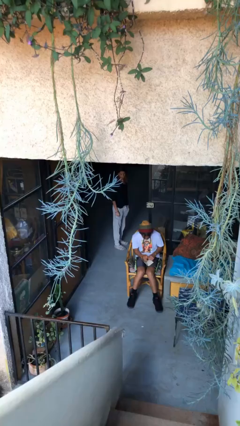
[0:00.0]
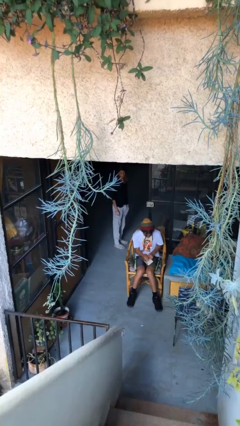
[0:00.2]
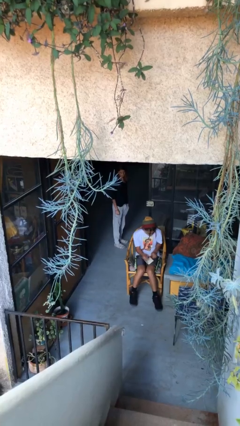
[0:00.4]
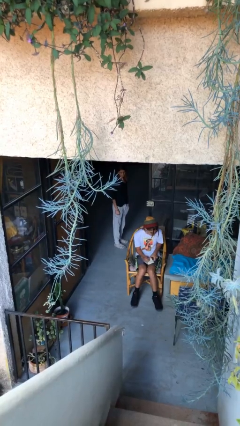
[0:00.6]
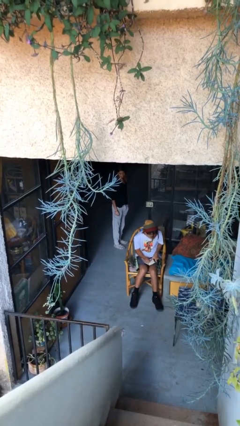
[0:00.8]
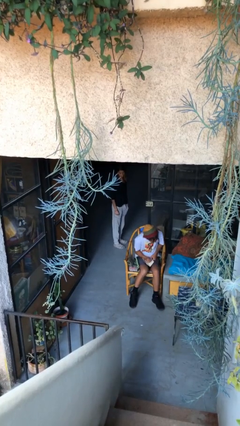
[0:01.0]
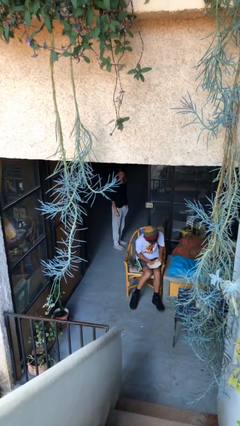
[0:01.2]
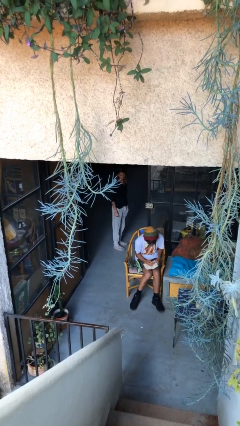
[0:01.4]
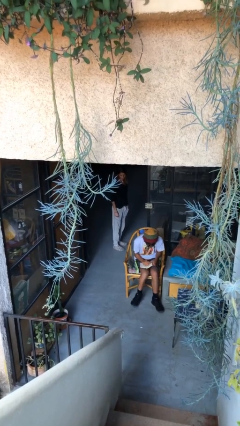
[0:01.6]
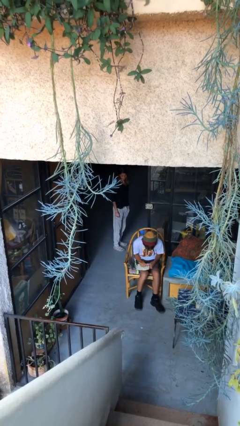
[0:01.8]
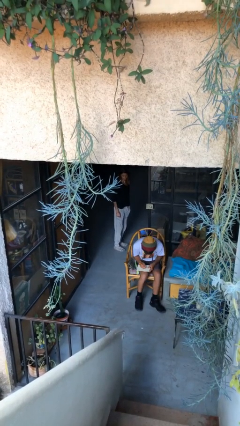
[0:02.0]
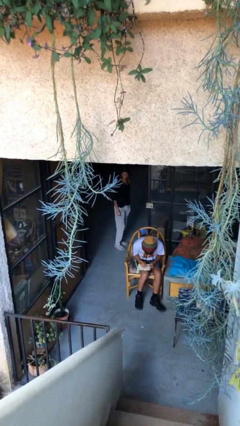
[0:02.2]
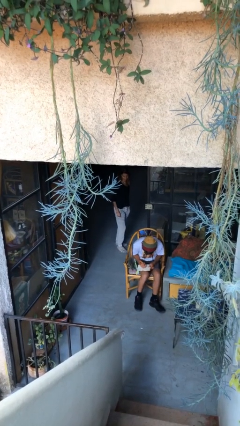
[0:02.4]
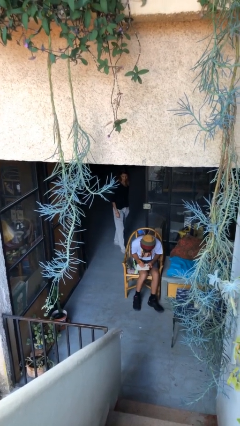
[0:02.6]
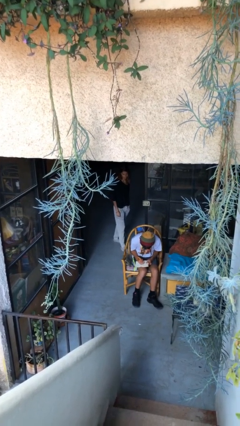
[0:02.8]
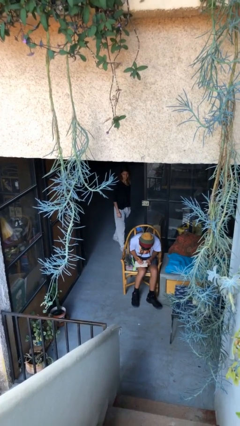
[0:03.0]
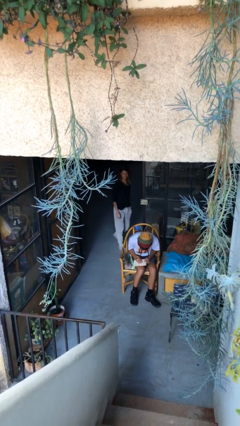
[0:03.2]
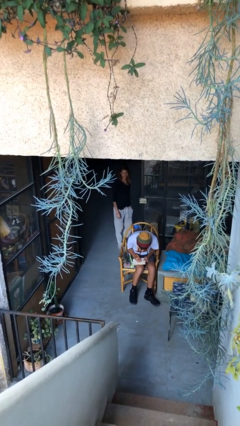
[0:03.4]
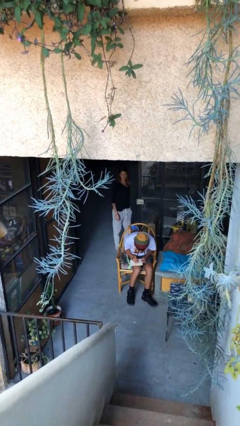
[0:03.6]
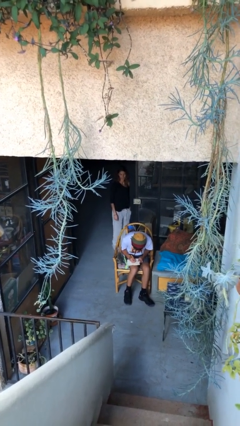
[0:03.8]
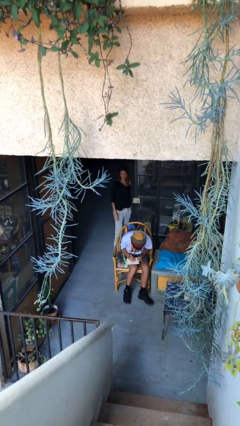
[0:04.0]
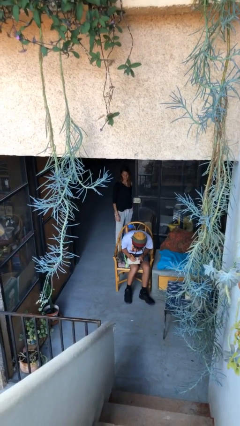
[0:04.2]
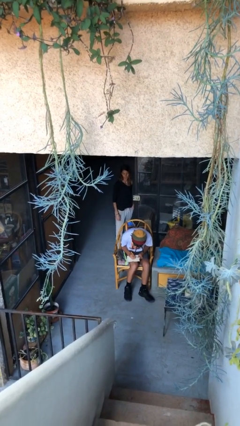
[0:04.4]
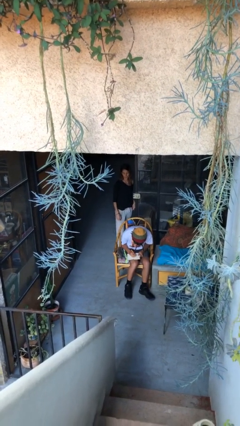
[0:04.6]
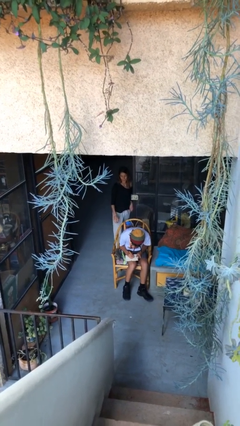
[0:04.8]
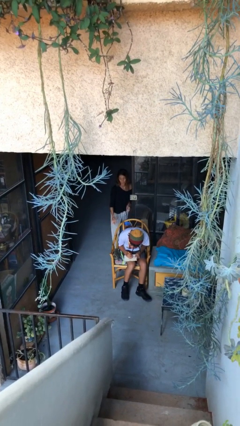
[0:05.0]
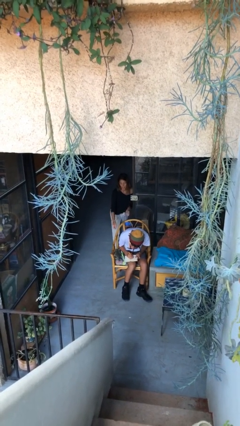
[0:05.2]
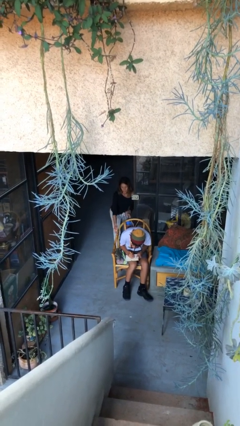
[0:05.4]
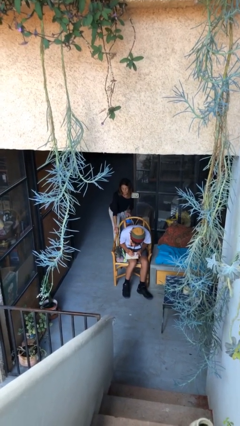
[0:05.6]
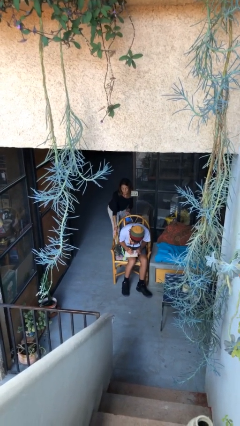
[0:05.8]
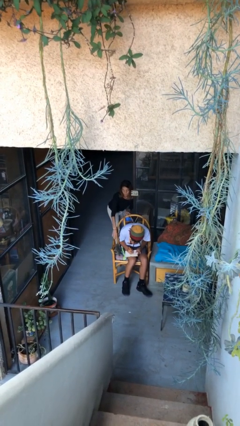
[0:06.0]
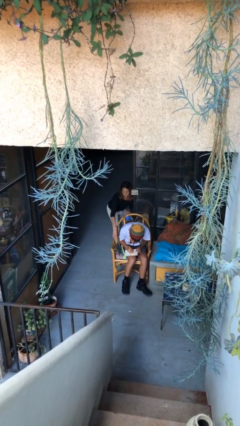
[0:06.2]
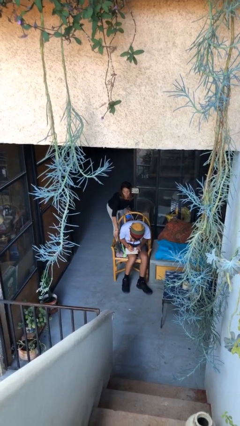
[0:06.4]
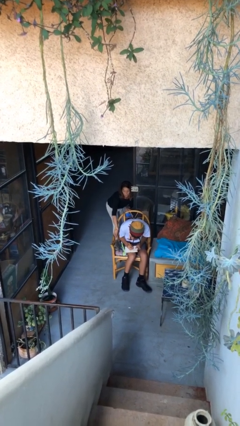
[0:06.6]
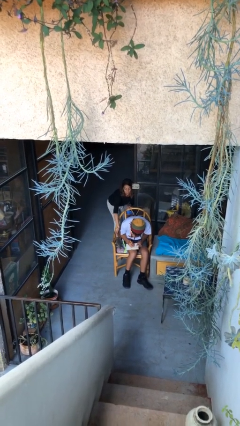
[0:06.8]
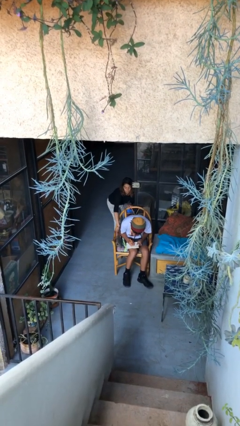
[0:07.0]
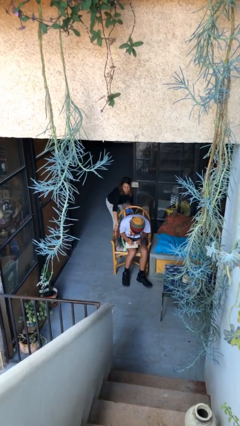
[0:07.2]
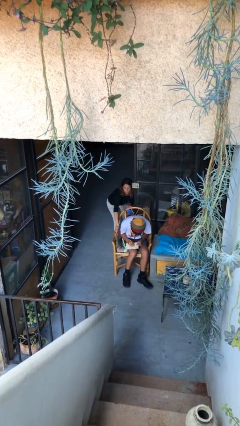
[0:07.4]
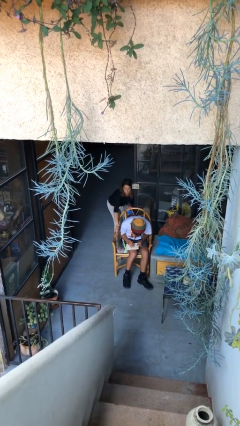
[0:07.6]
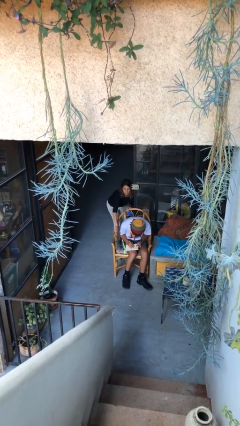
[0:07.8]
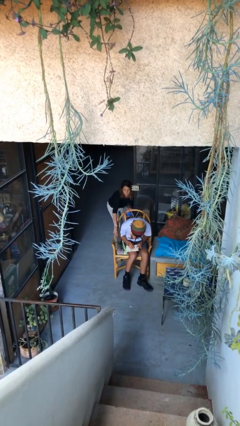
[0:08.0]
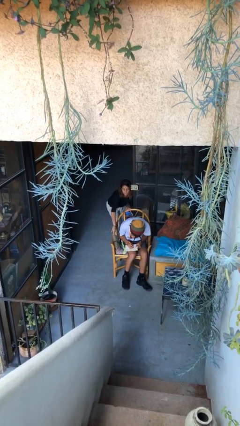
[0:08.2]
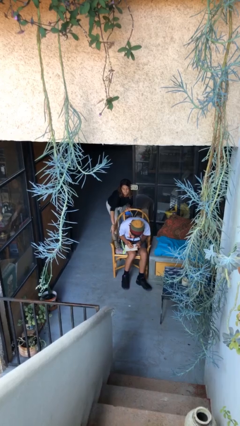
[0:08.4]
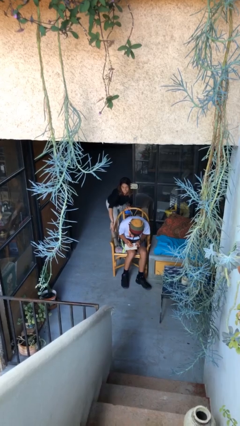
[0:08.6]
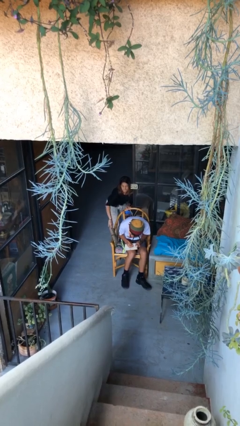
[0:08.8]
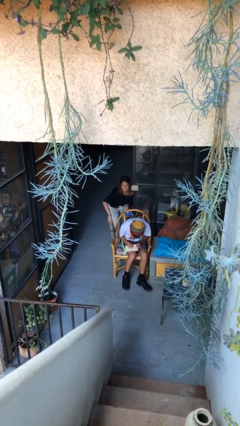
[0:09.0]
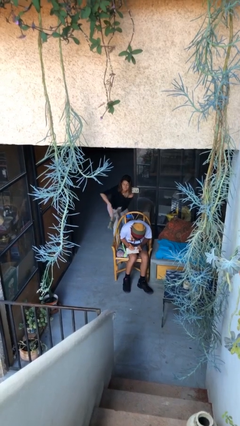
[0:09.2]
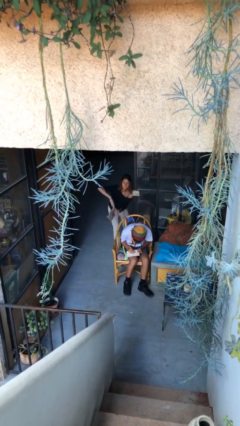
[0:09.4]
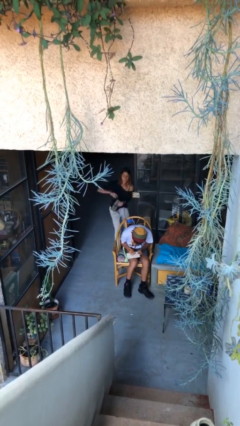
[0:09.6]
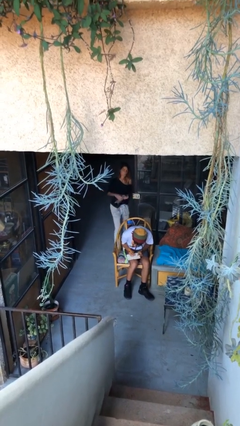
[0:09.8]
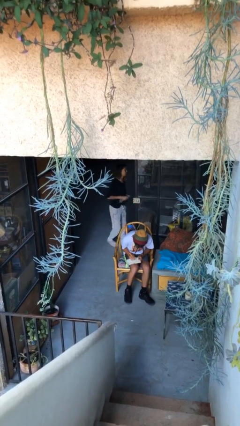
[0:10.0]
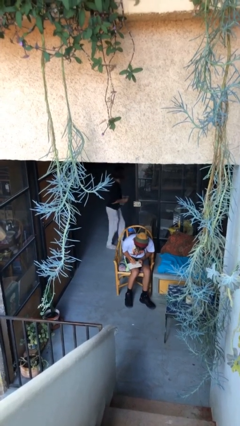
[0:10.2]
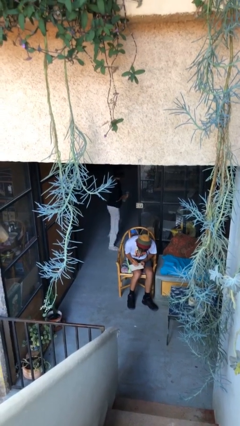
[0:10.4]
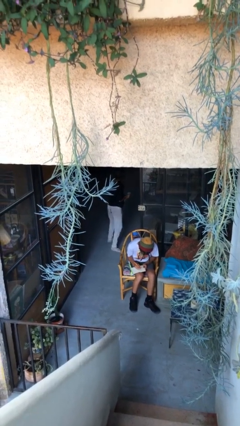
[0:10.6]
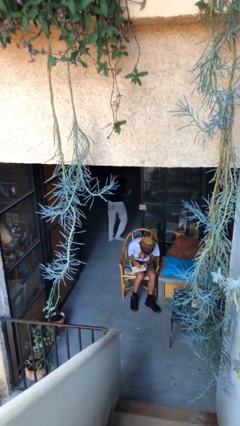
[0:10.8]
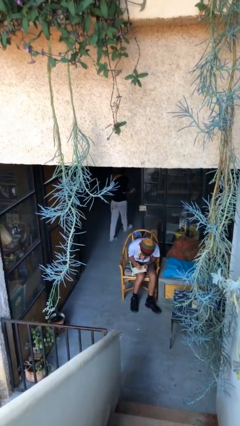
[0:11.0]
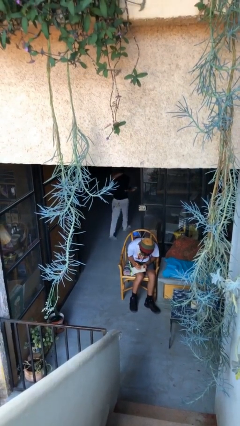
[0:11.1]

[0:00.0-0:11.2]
person steals object from person

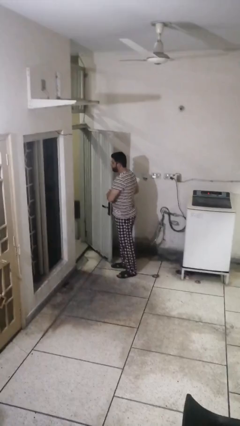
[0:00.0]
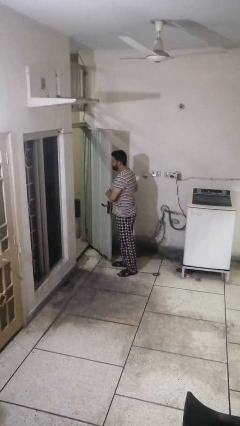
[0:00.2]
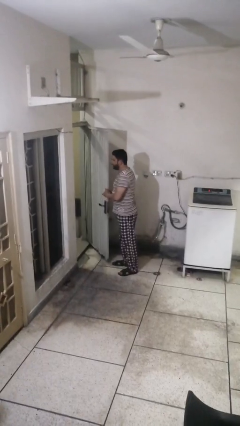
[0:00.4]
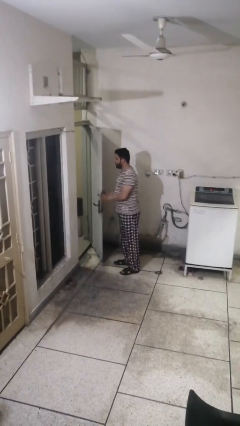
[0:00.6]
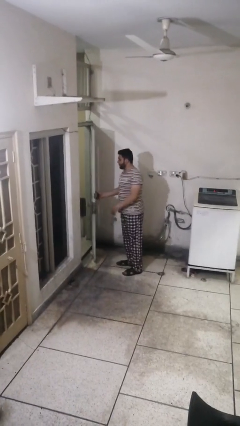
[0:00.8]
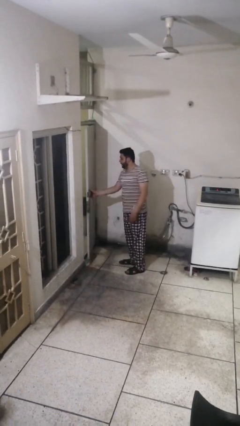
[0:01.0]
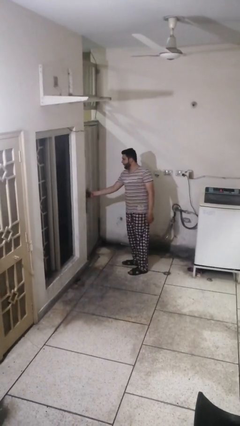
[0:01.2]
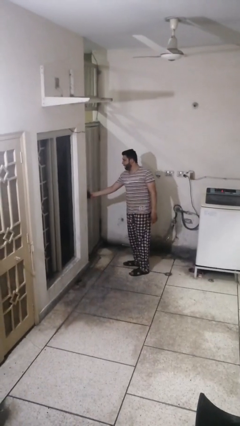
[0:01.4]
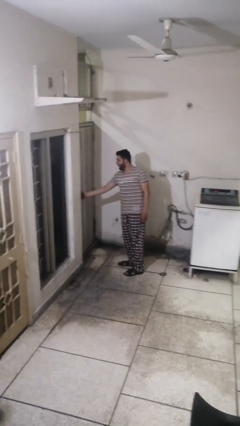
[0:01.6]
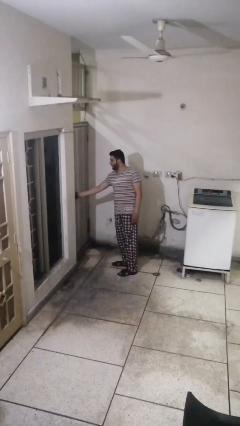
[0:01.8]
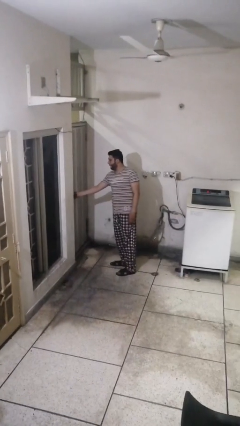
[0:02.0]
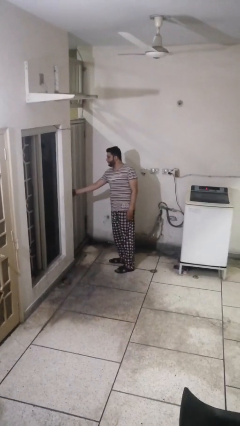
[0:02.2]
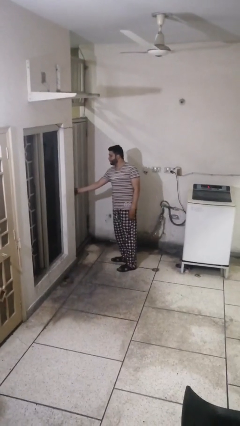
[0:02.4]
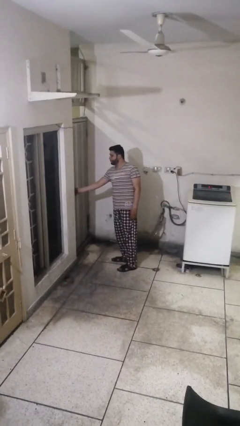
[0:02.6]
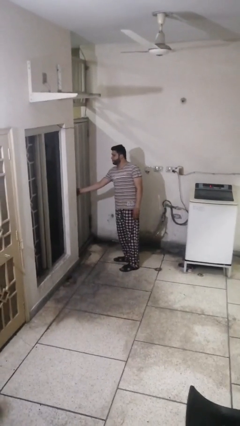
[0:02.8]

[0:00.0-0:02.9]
person closes facility door

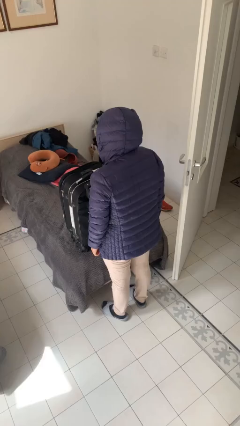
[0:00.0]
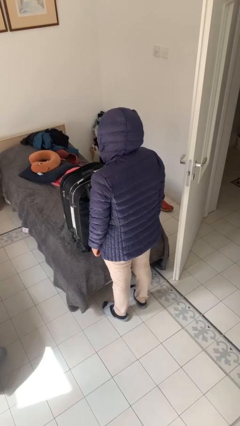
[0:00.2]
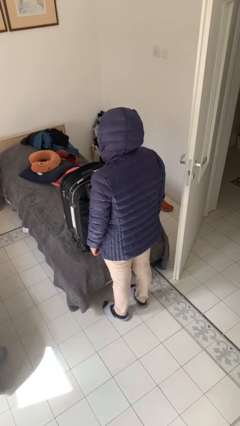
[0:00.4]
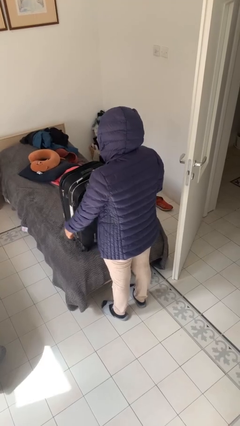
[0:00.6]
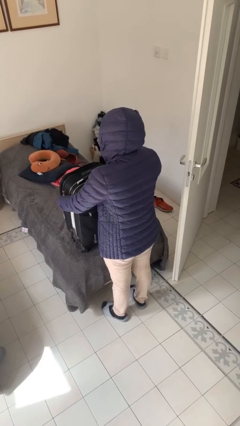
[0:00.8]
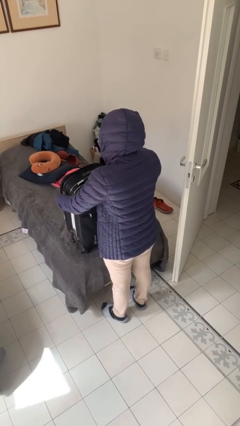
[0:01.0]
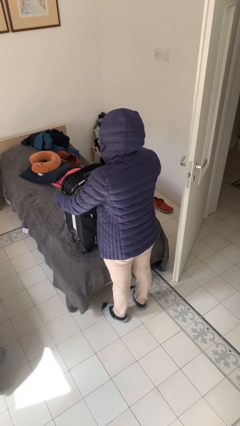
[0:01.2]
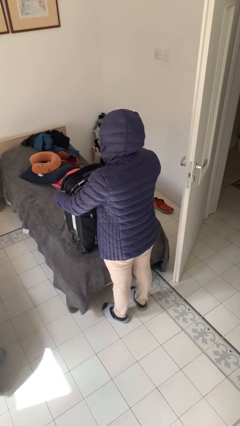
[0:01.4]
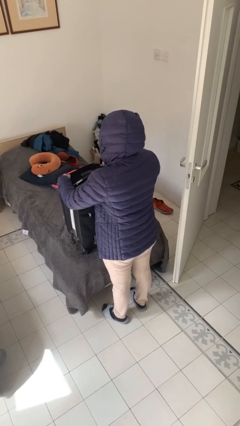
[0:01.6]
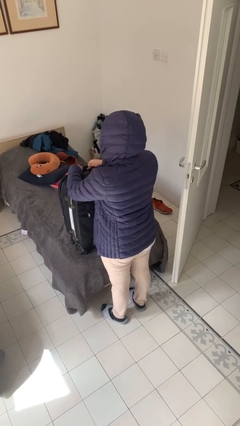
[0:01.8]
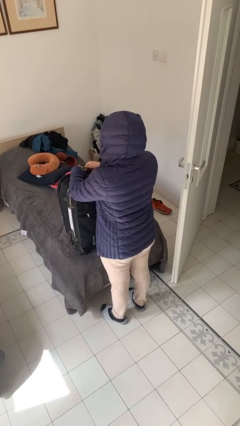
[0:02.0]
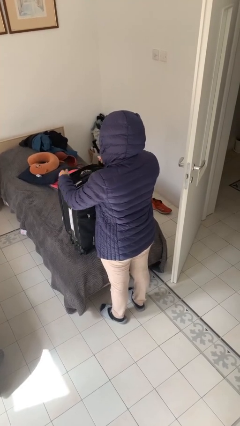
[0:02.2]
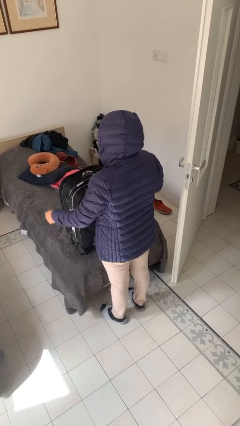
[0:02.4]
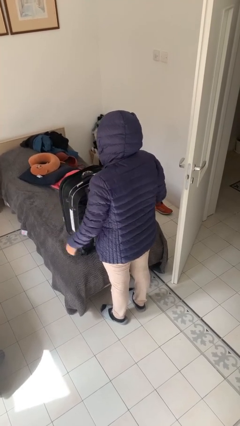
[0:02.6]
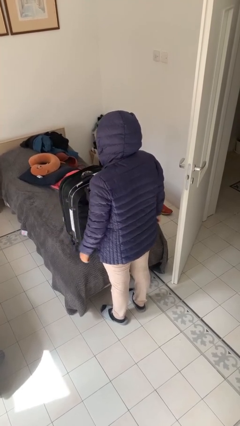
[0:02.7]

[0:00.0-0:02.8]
person closes suitcase

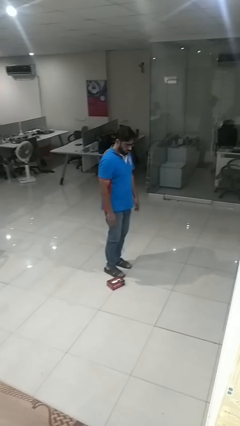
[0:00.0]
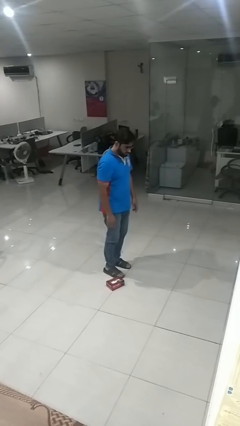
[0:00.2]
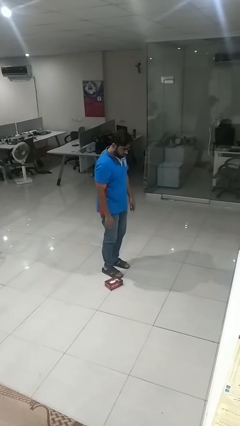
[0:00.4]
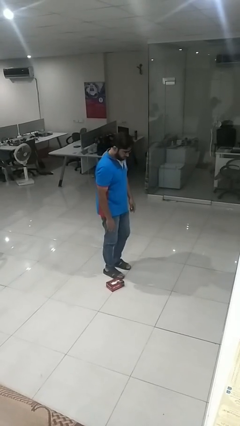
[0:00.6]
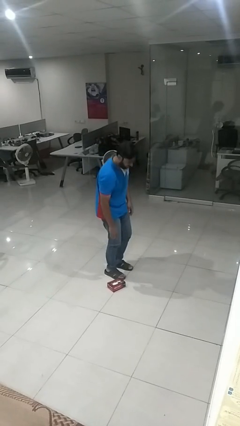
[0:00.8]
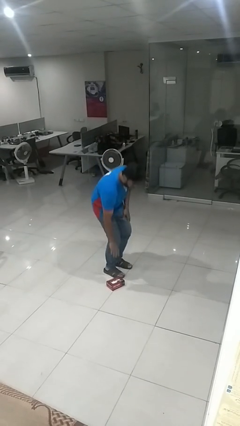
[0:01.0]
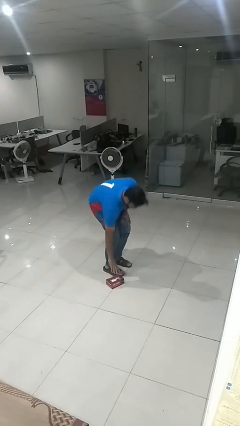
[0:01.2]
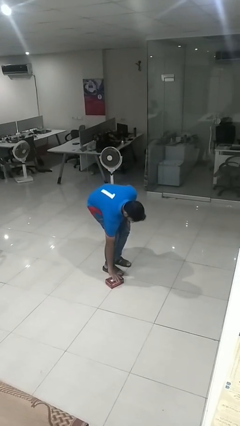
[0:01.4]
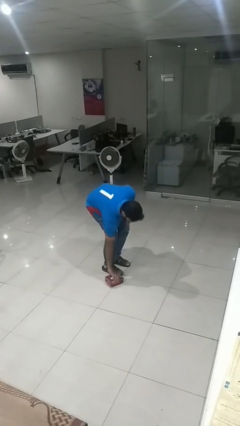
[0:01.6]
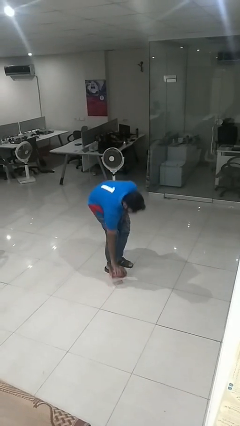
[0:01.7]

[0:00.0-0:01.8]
person picks up object from floor
